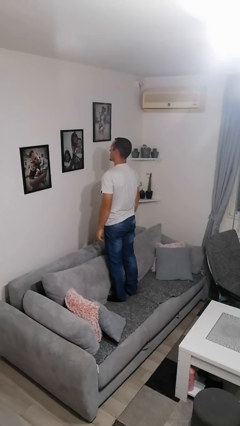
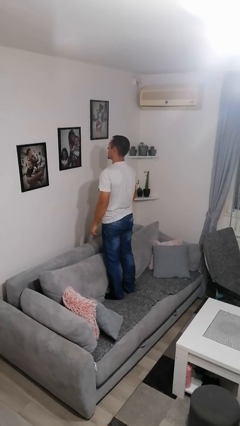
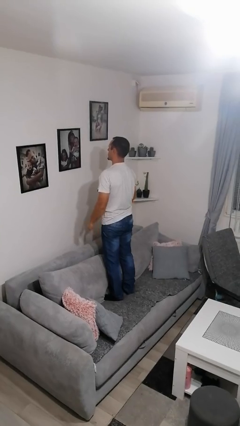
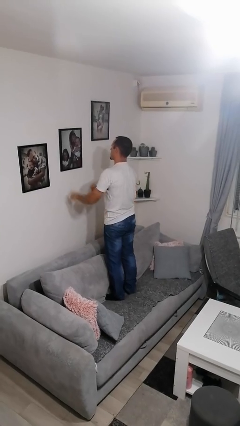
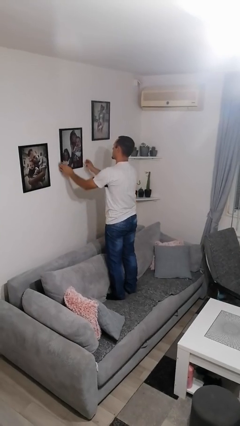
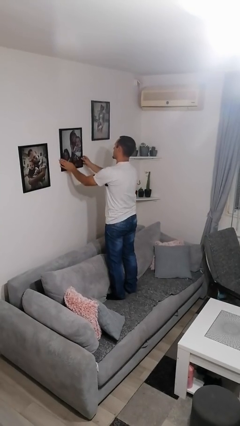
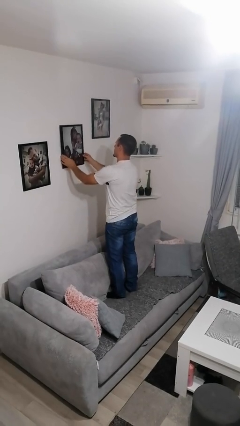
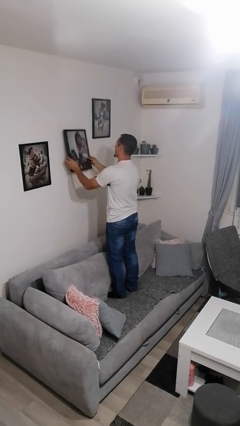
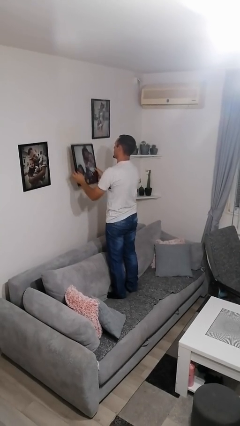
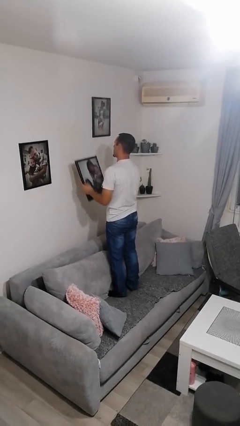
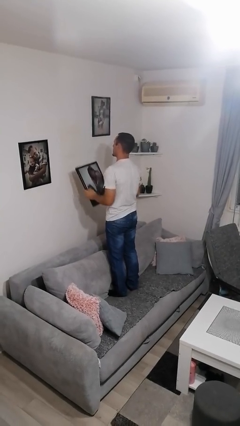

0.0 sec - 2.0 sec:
person takes down picture frame

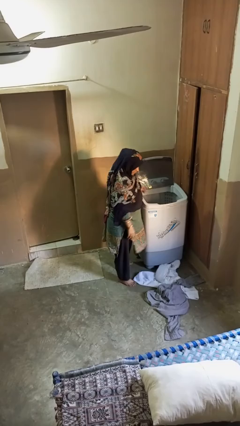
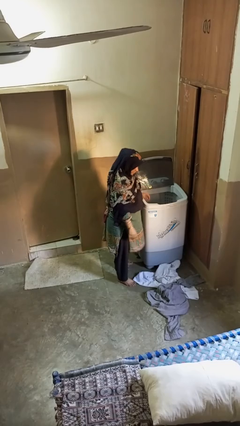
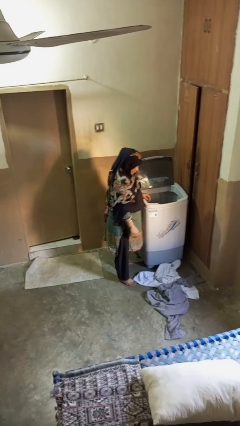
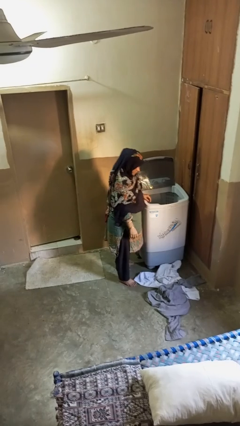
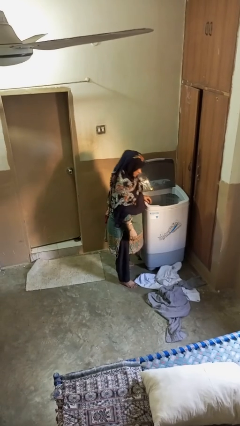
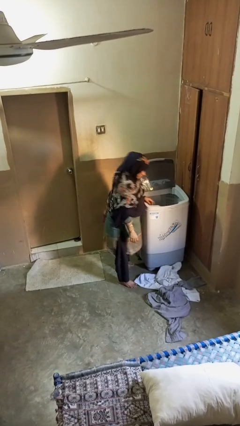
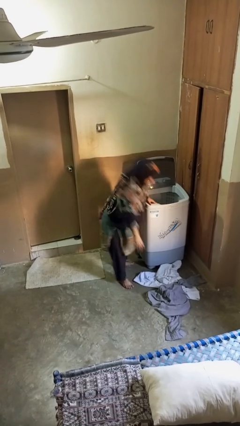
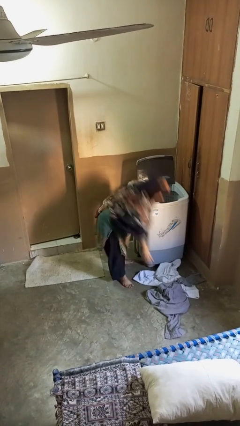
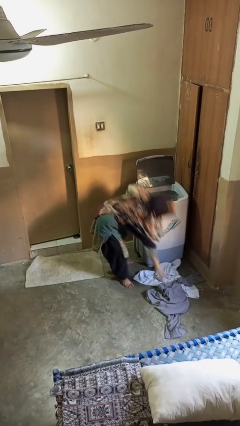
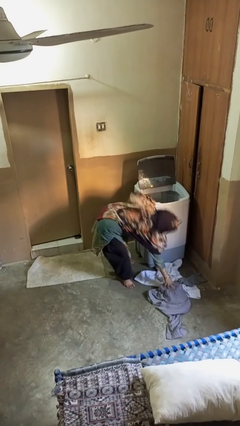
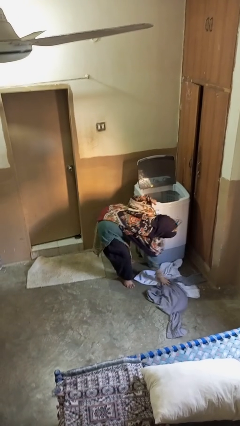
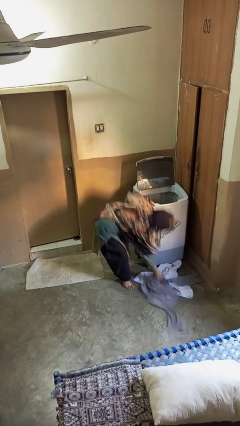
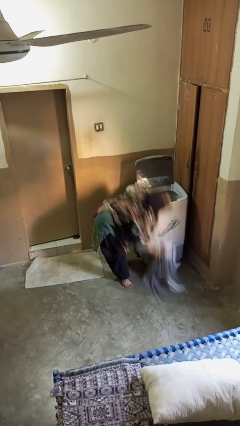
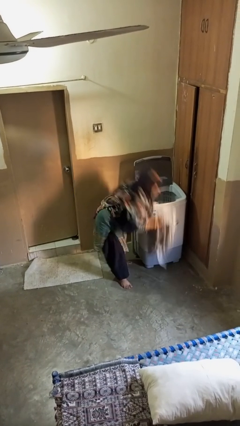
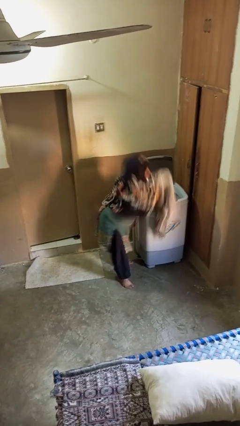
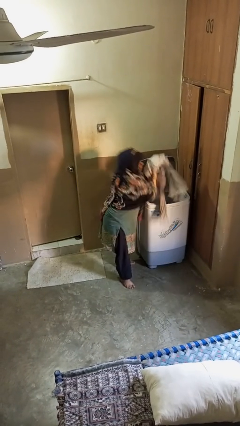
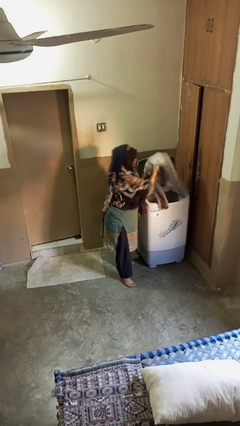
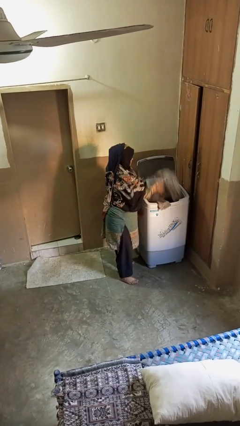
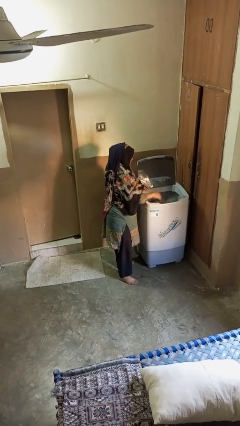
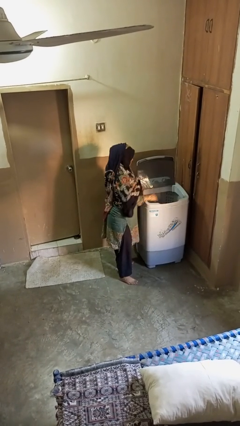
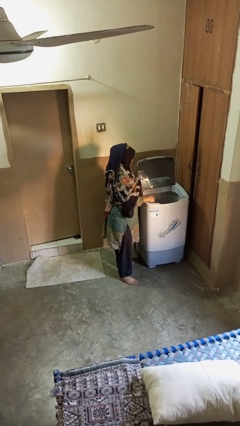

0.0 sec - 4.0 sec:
person loads clotheswasher

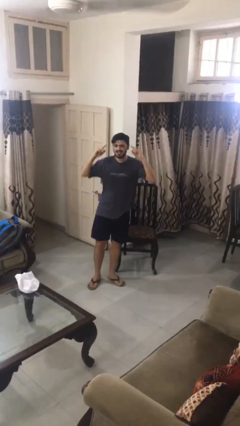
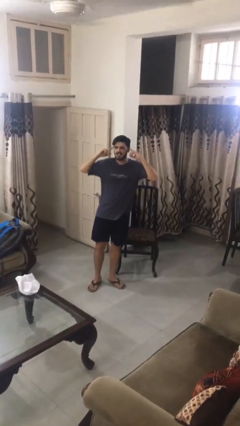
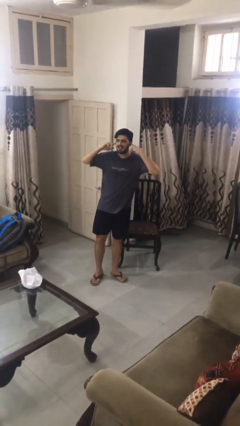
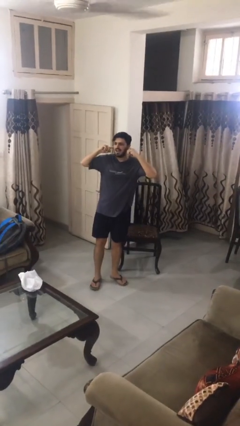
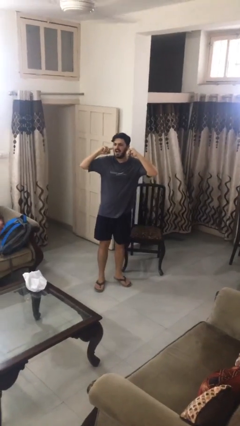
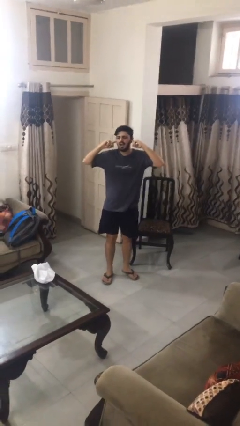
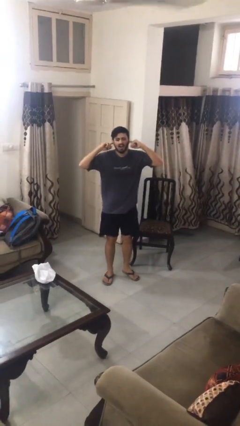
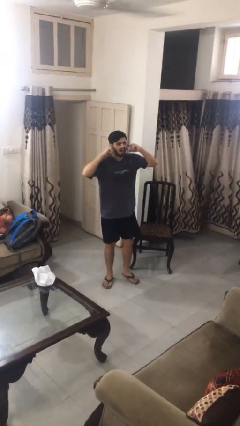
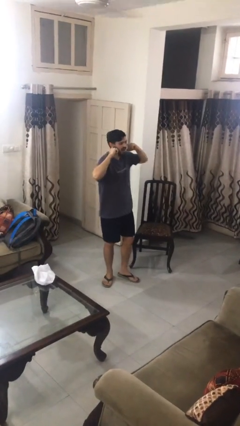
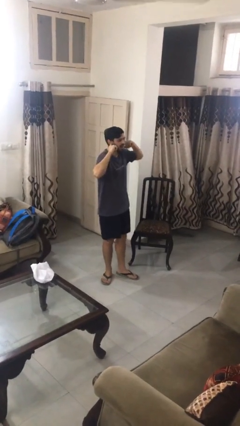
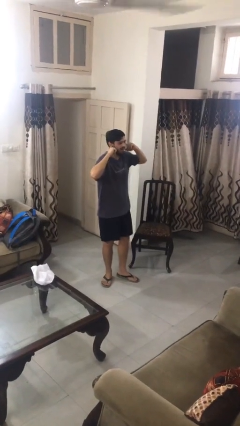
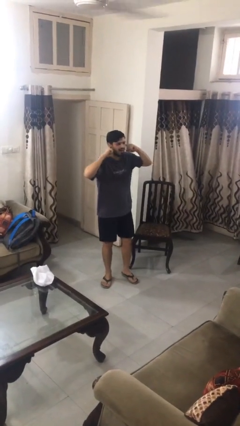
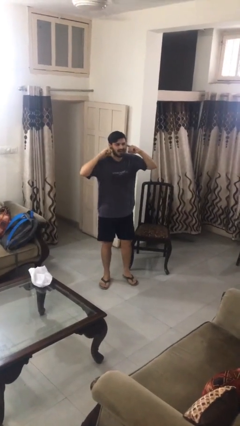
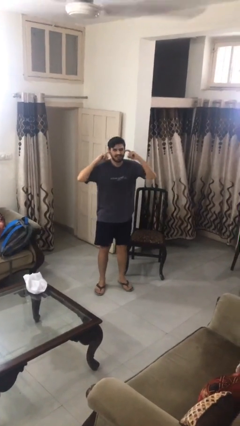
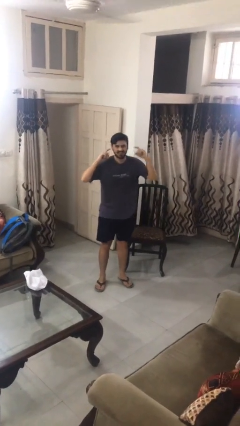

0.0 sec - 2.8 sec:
person puts fingers in ear

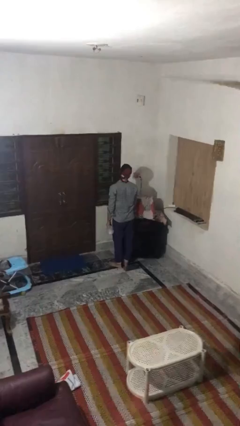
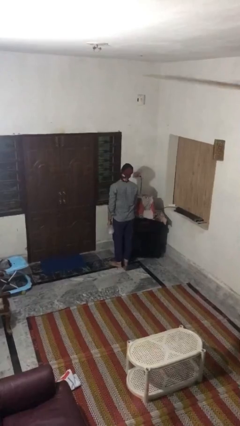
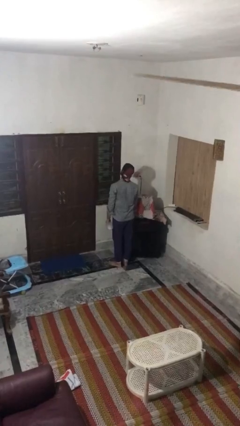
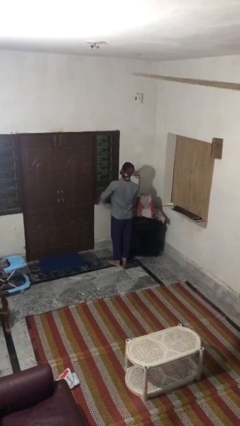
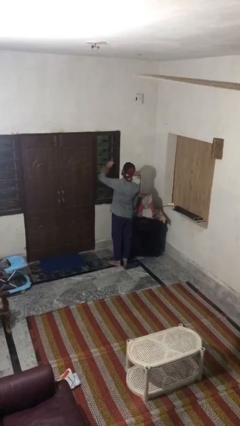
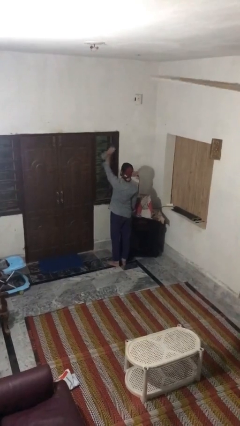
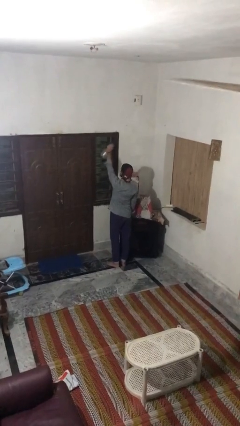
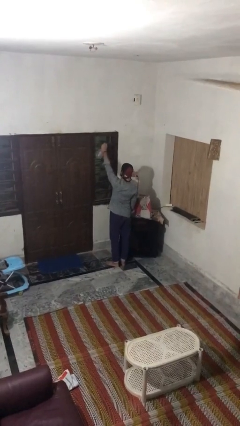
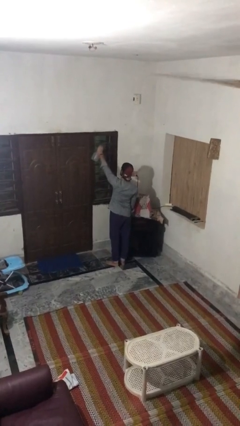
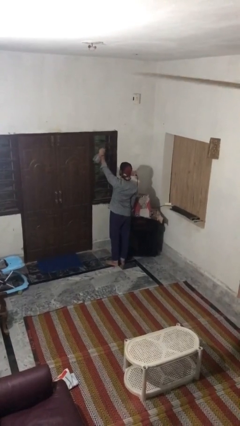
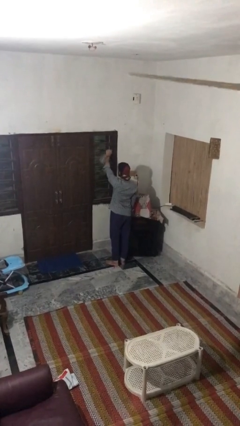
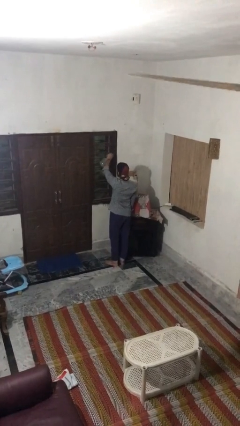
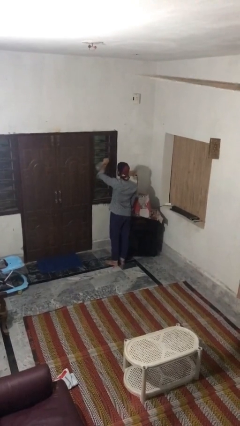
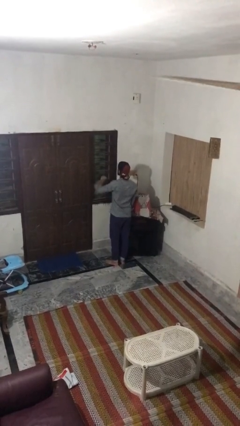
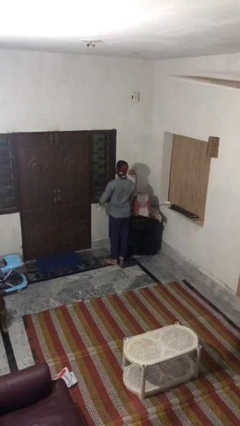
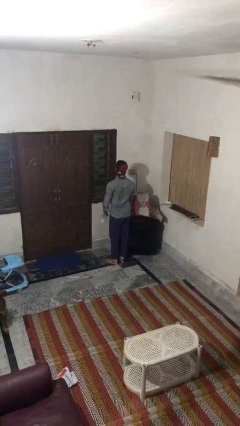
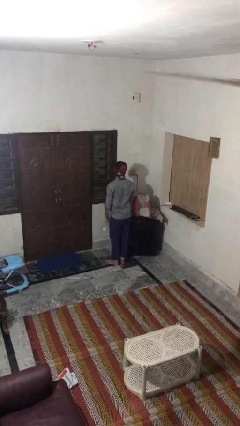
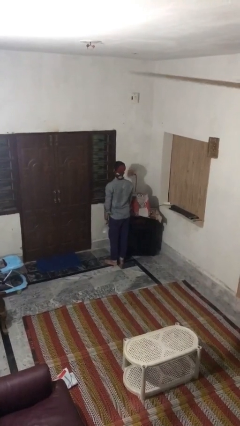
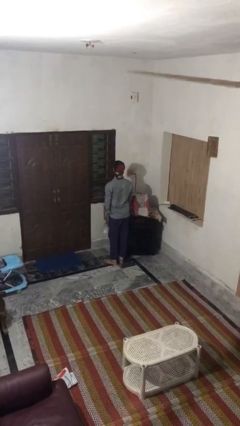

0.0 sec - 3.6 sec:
person sprays from bottle

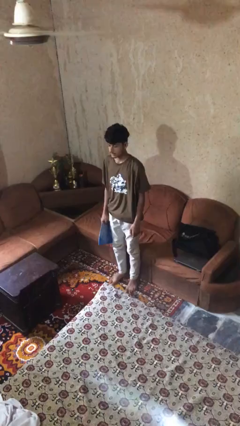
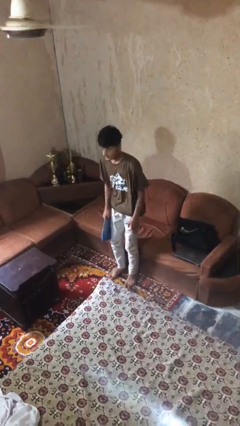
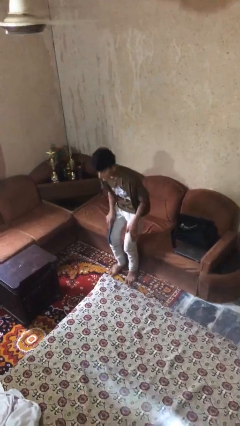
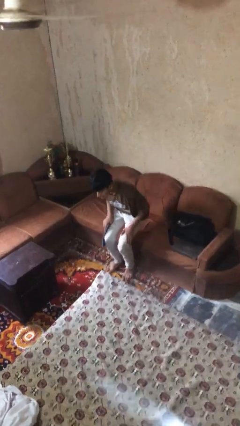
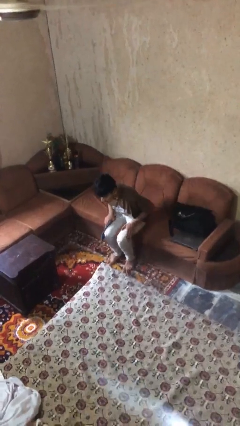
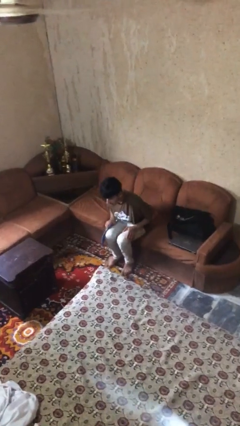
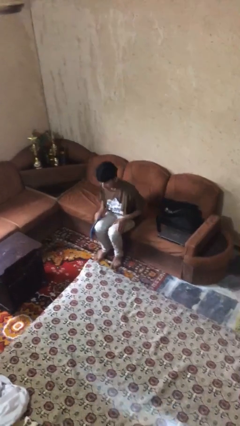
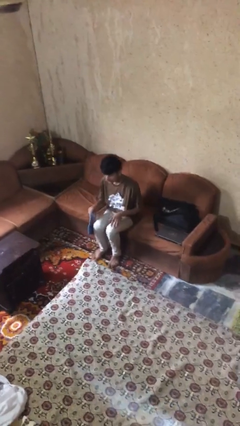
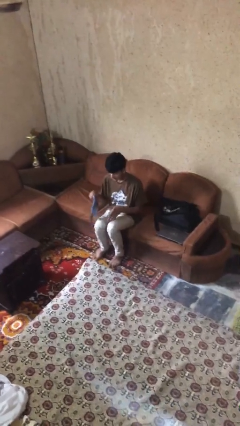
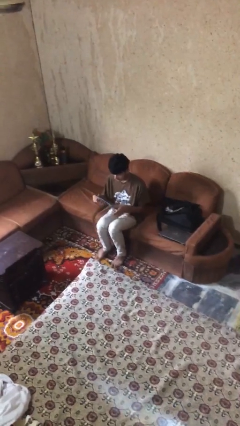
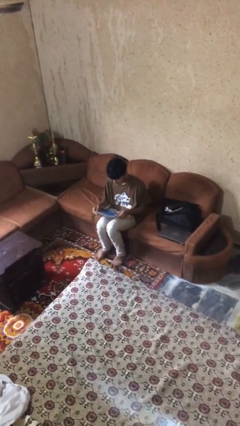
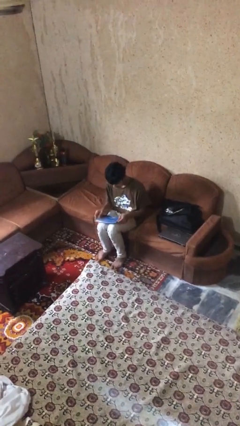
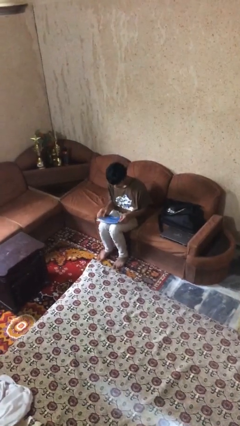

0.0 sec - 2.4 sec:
person sits down

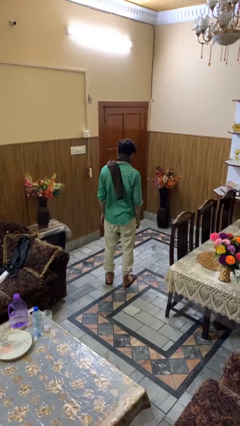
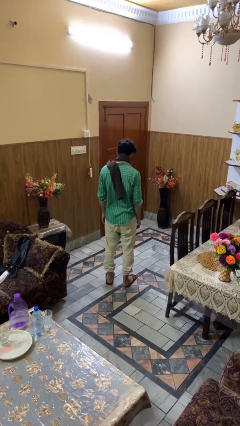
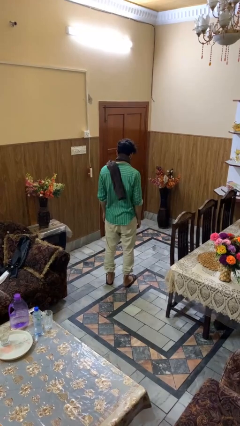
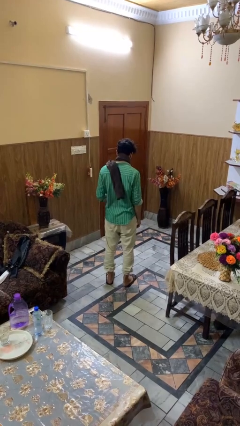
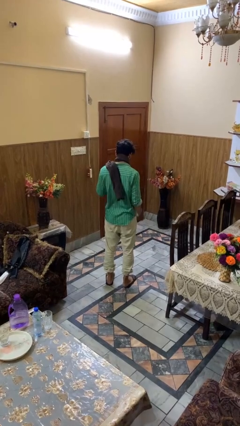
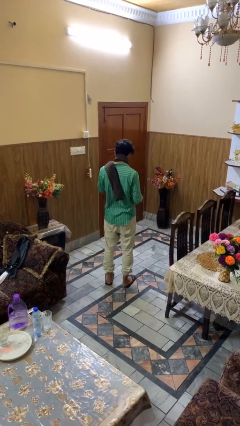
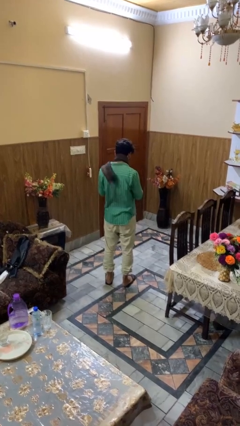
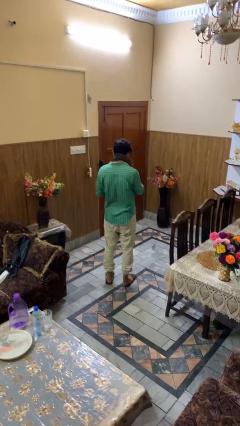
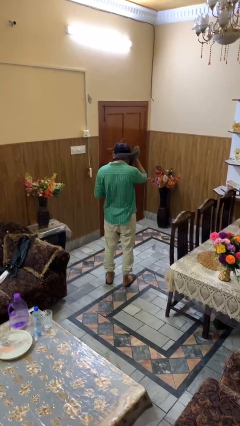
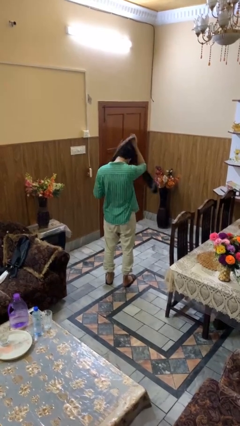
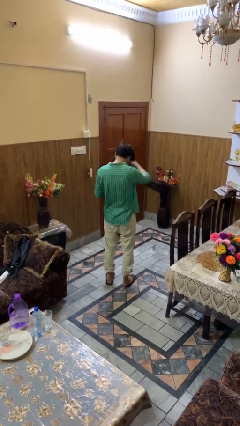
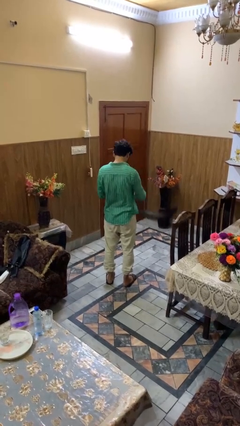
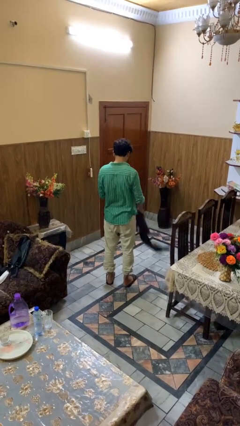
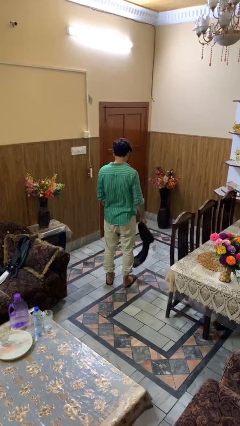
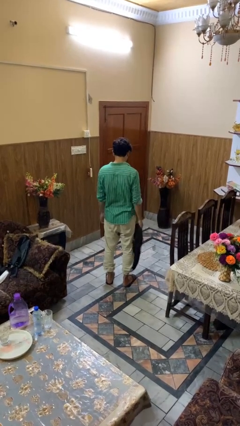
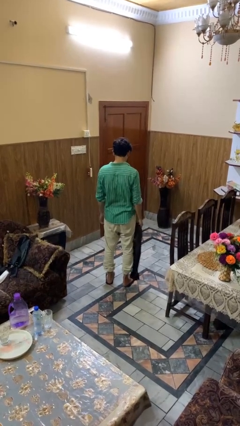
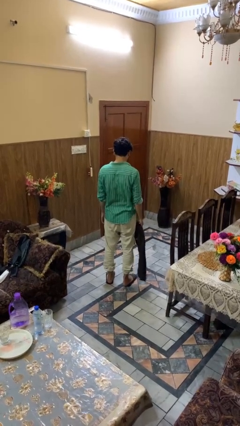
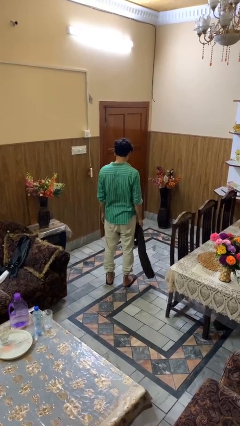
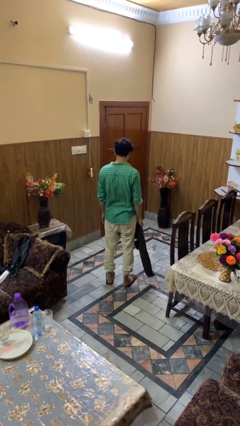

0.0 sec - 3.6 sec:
person takes off scarf
